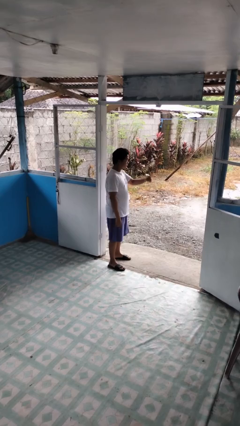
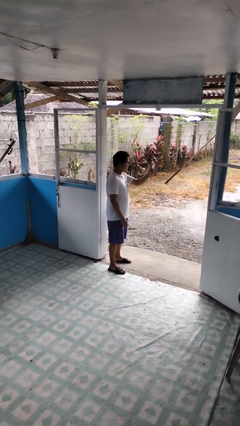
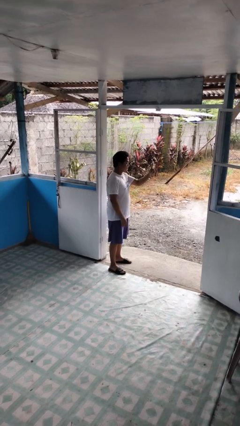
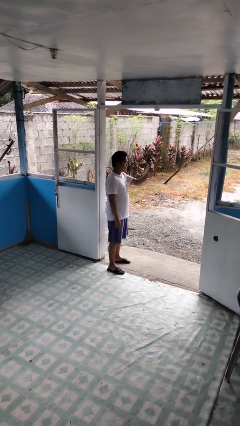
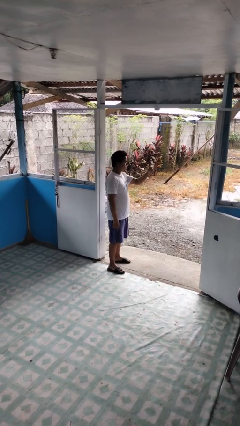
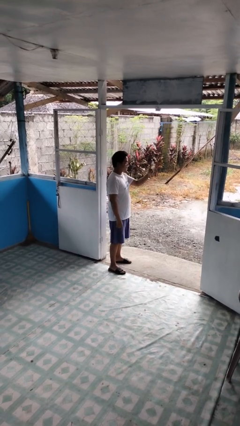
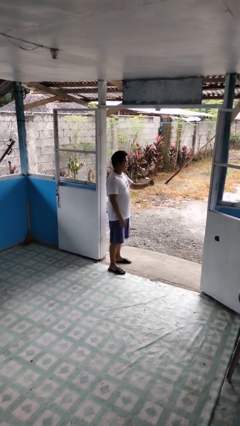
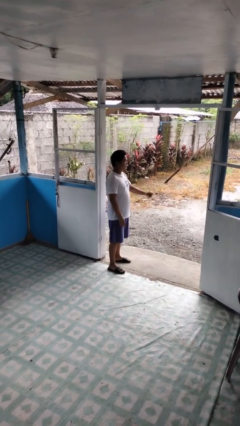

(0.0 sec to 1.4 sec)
person gestures number one

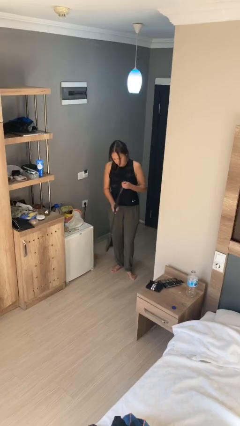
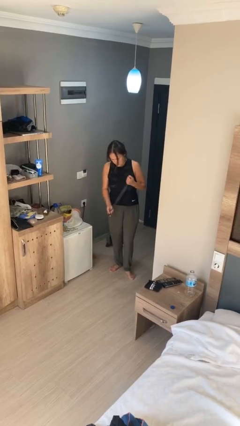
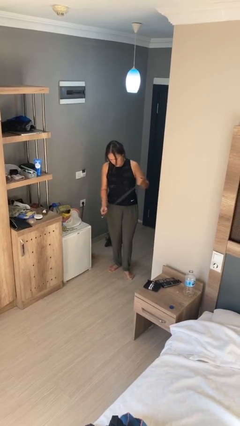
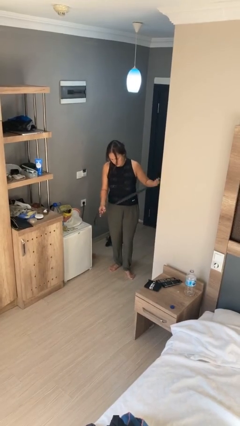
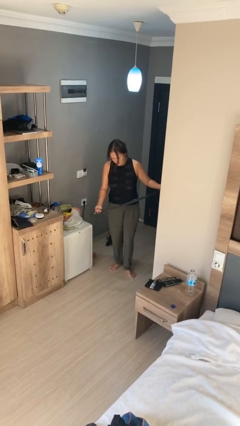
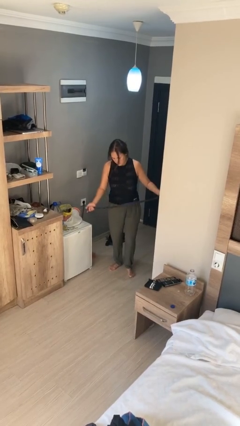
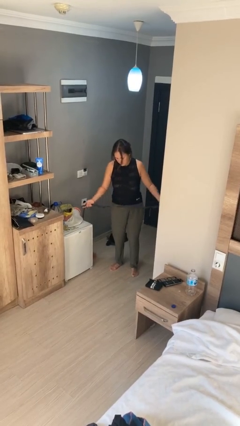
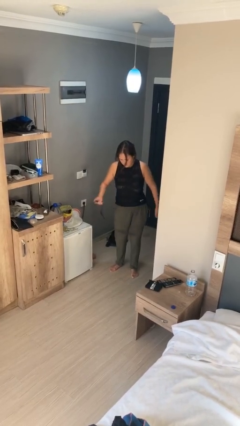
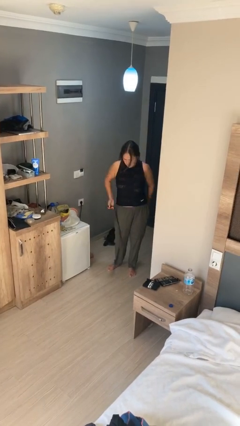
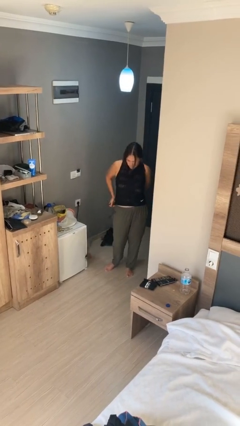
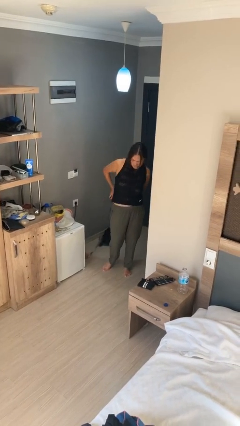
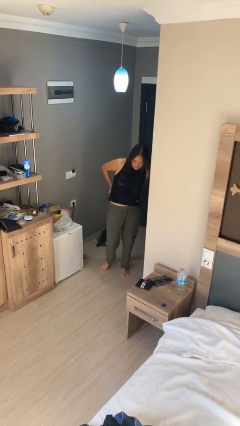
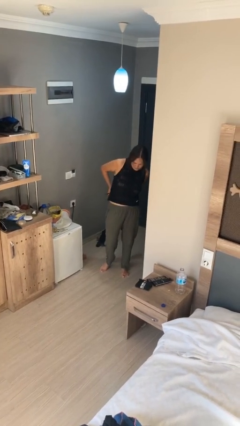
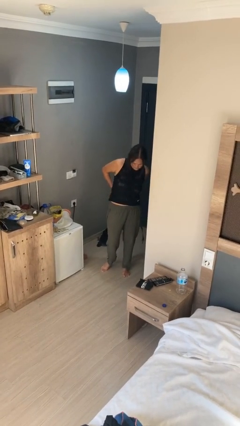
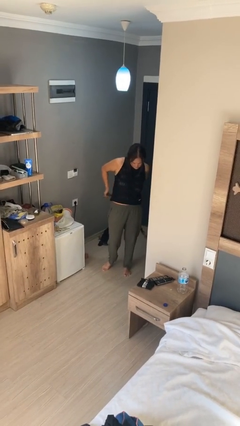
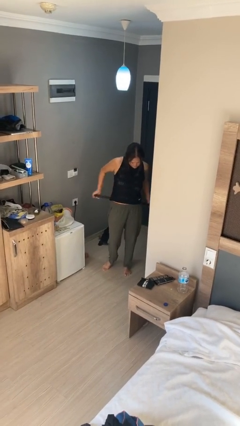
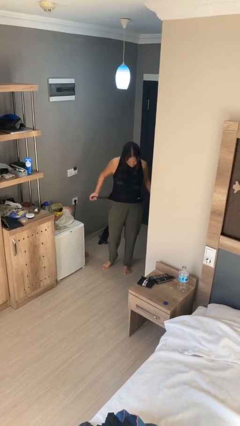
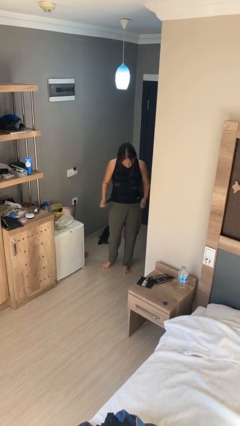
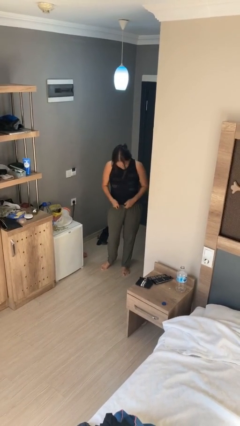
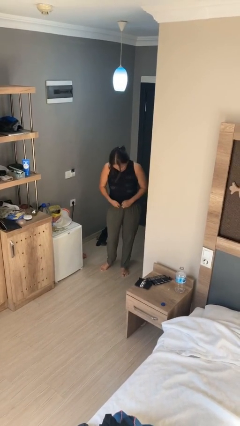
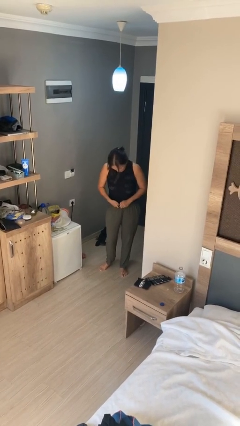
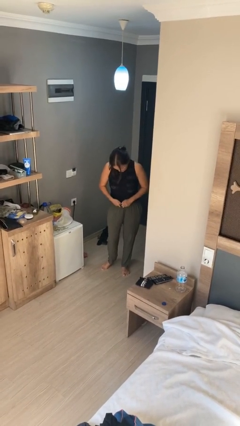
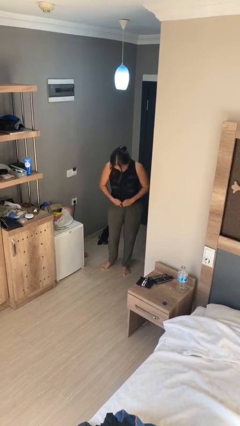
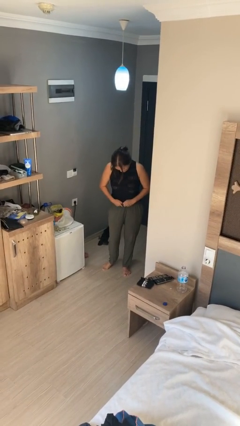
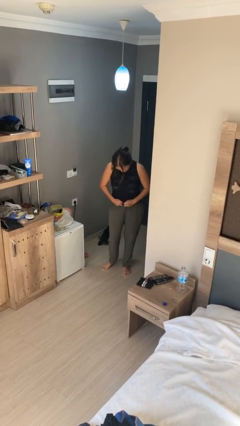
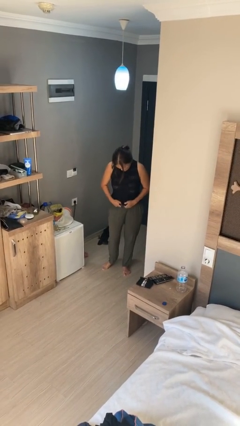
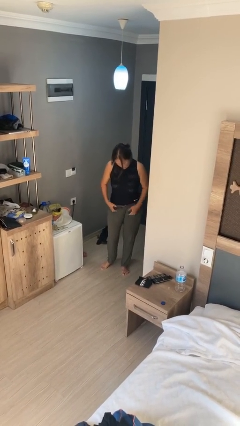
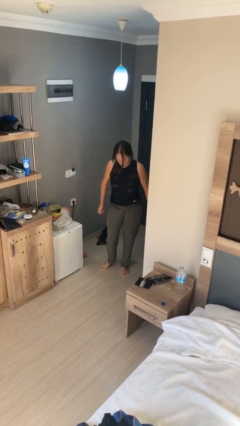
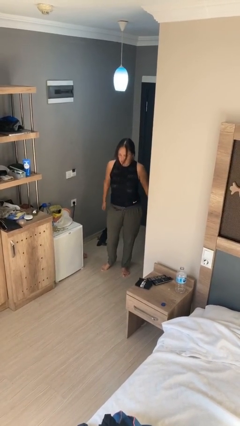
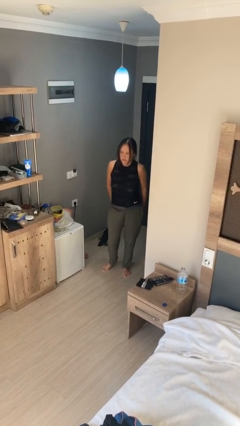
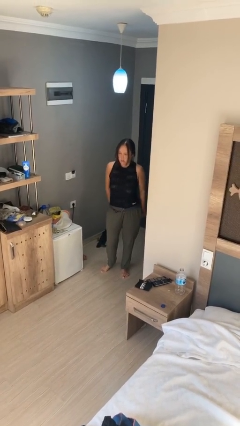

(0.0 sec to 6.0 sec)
person puts on belt

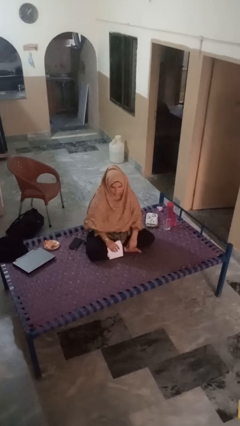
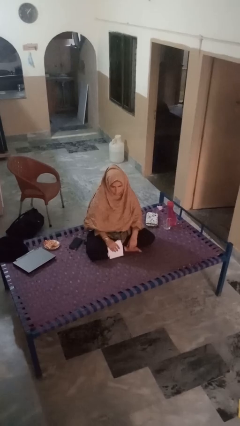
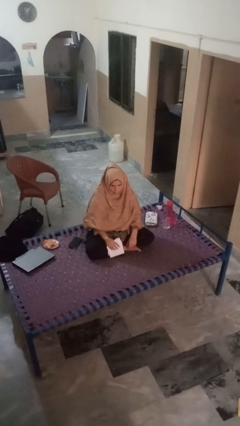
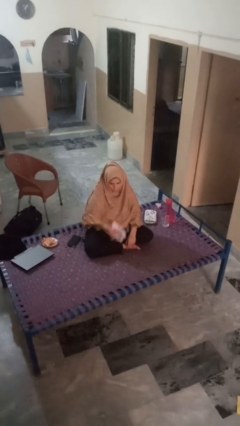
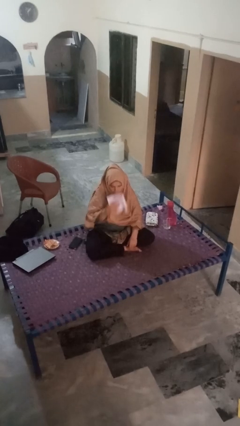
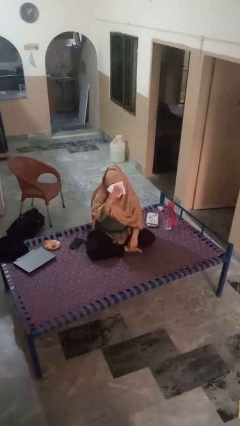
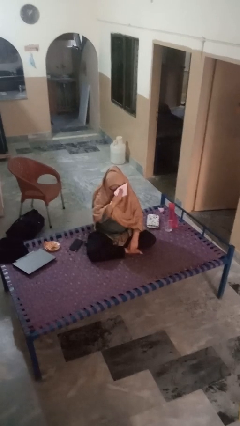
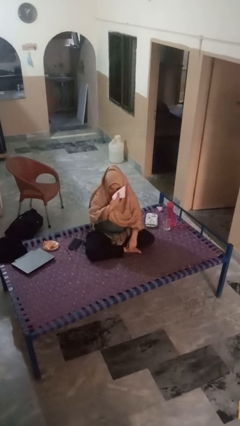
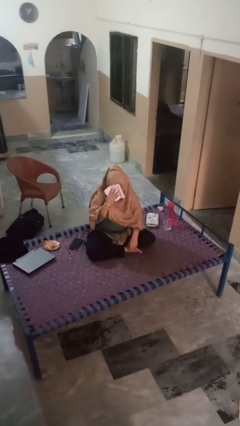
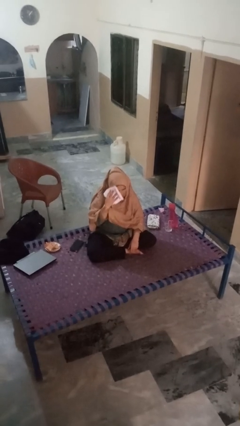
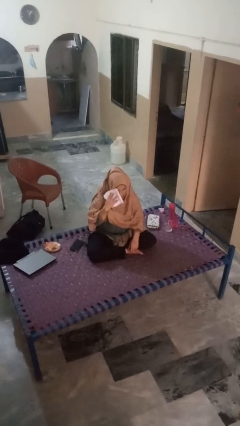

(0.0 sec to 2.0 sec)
person wipes mouth with napkin

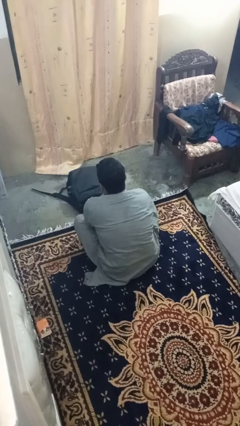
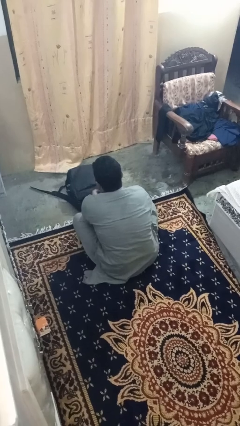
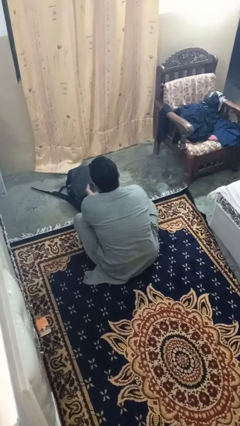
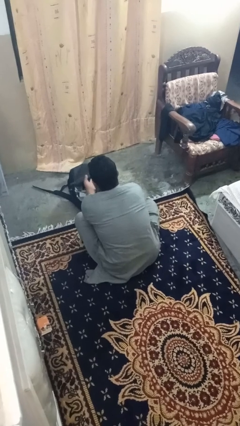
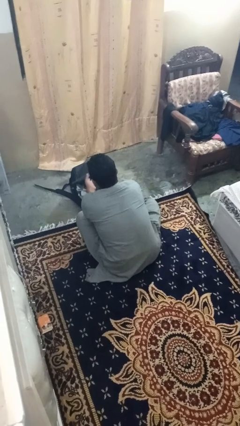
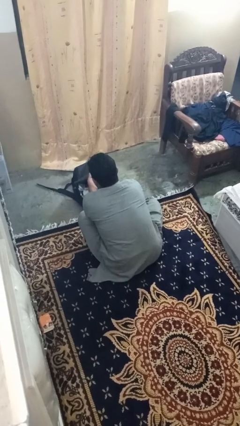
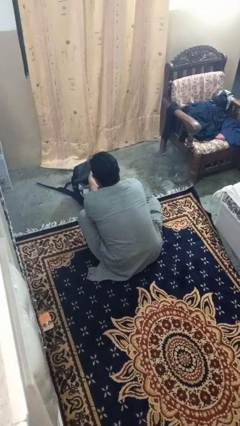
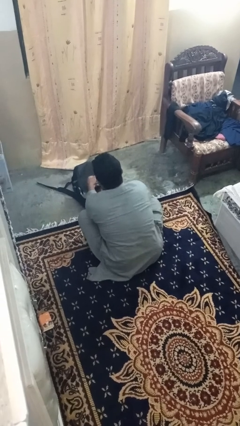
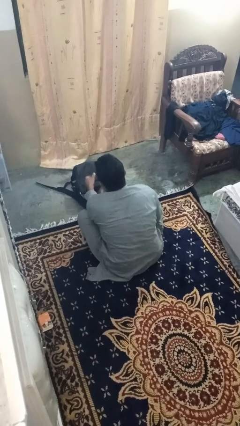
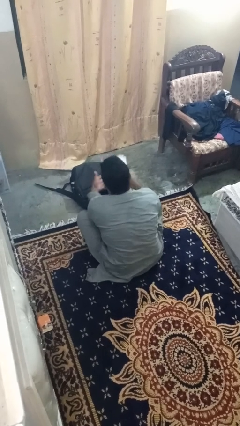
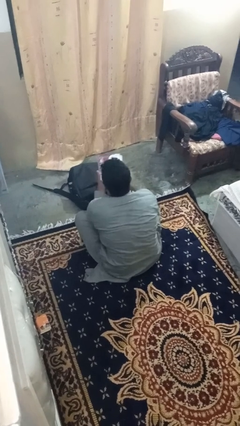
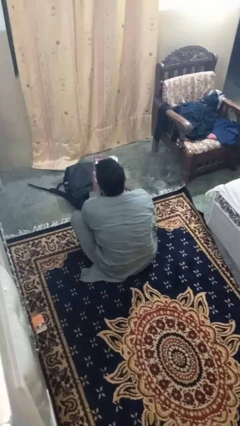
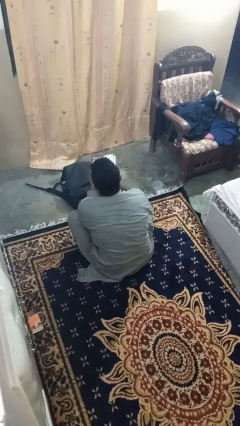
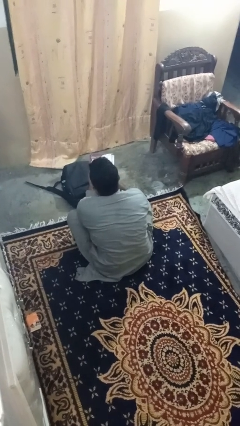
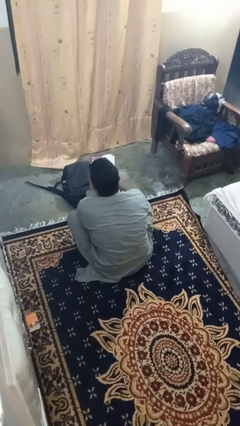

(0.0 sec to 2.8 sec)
person takes object from bag

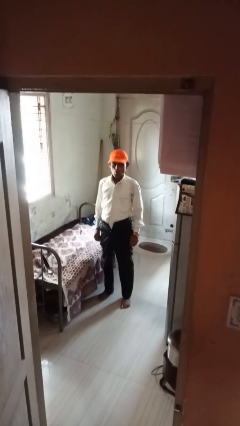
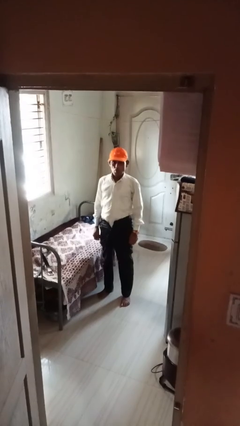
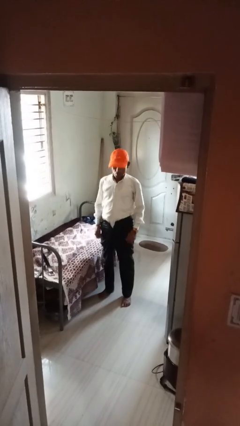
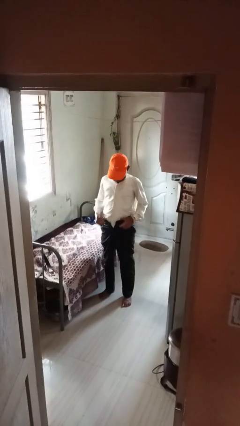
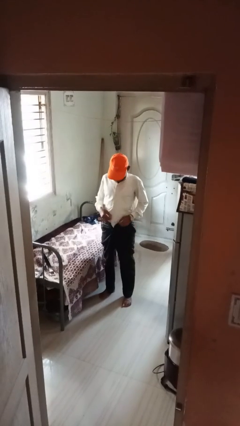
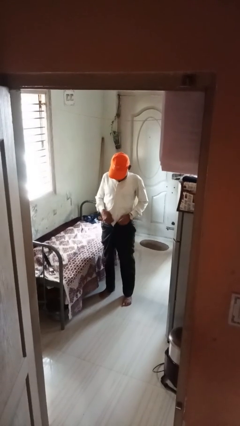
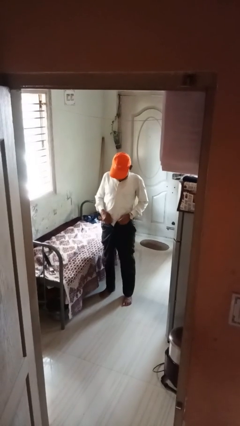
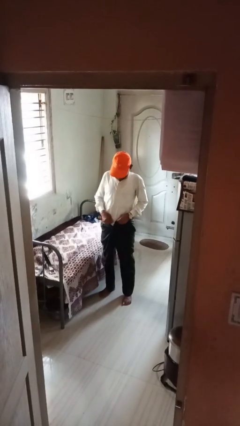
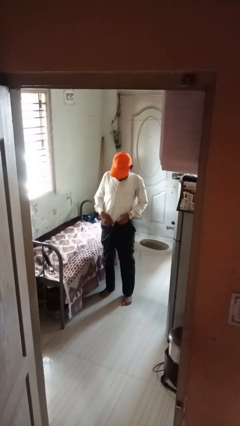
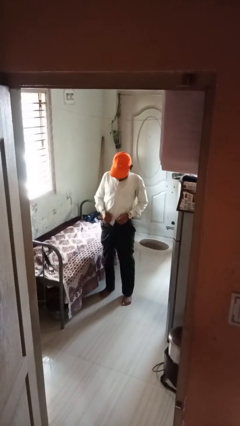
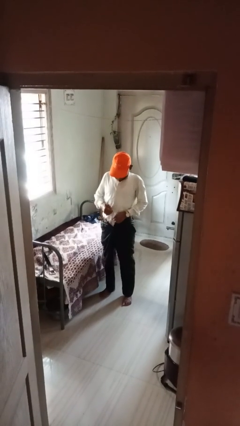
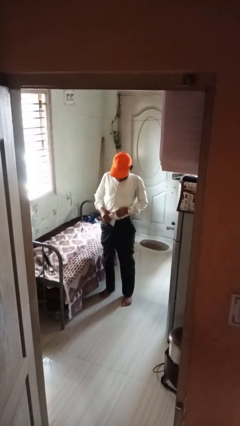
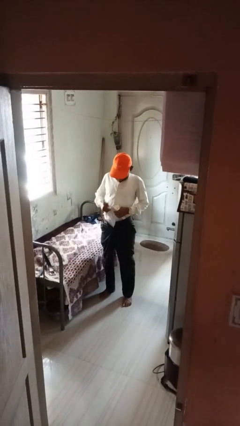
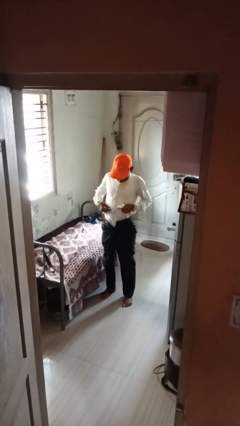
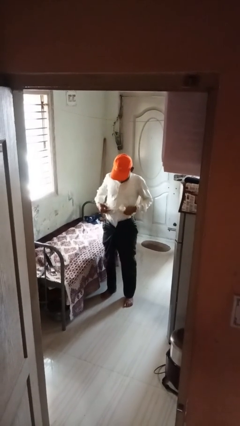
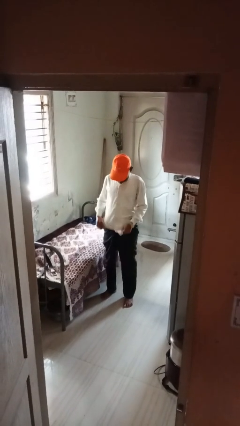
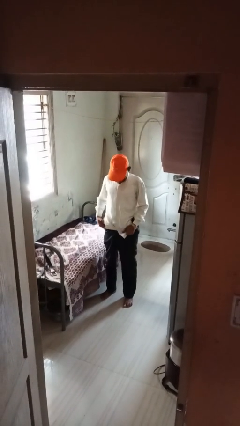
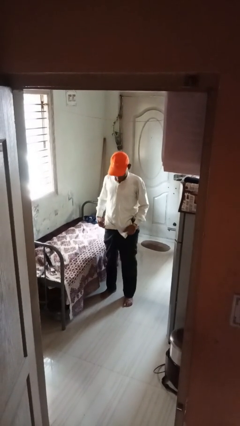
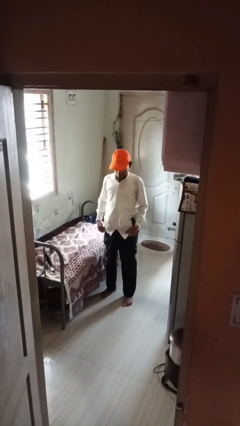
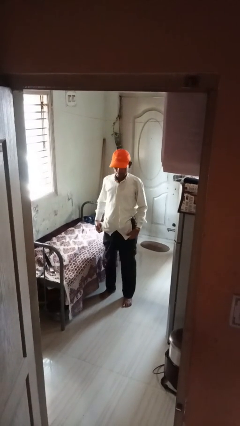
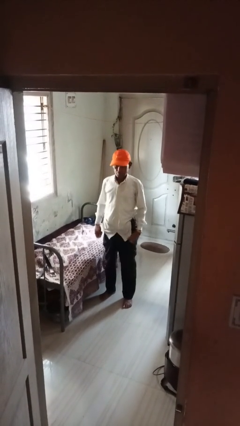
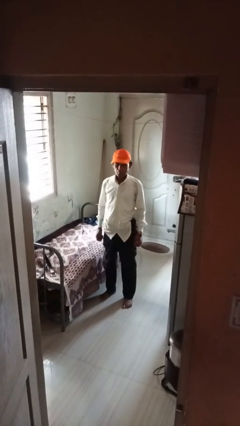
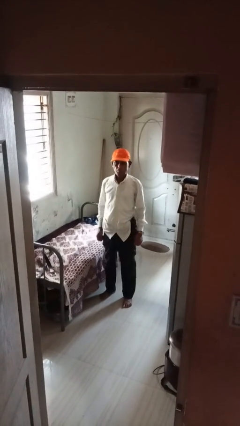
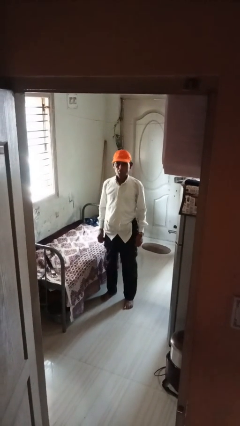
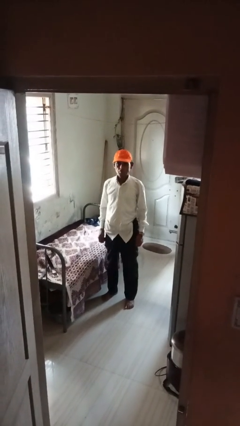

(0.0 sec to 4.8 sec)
person untucks shirt

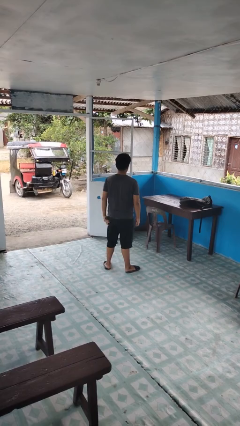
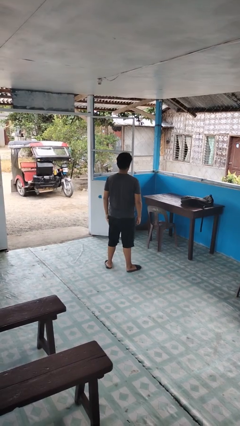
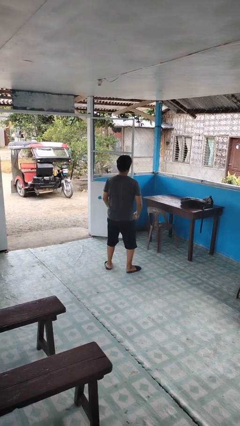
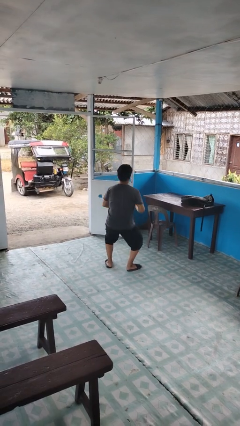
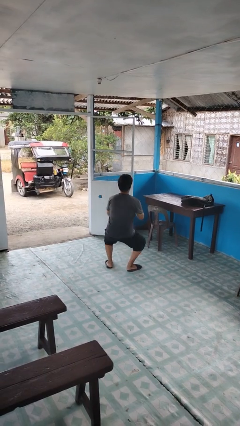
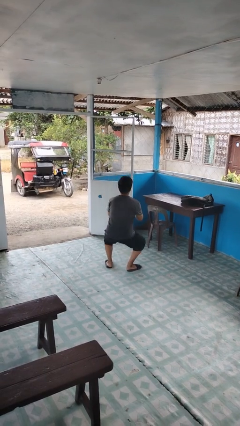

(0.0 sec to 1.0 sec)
person squats
